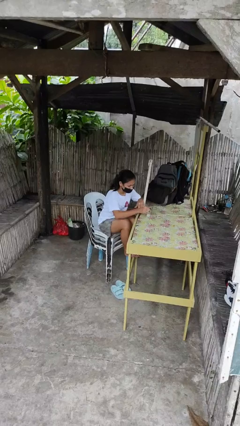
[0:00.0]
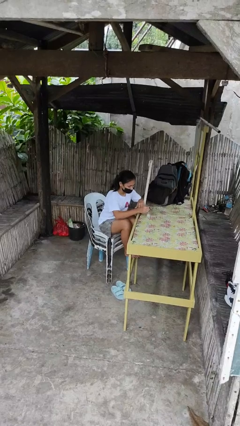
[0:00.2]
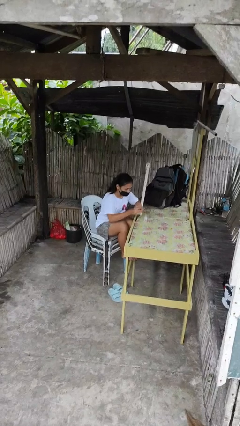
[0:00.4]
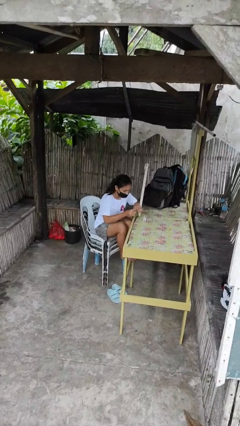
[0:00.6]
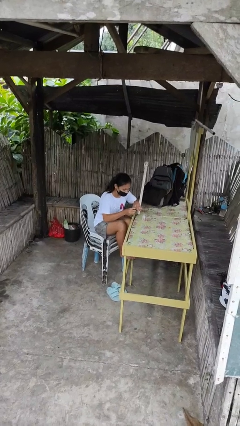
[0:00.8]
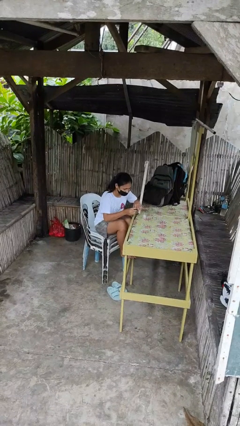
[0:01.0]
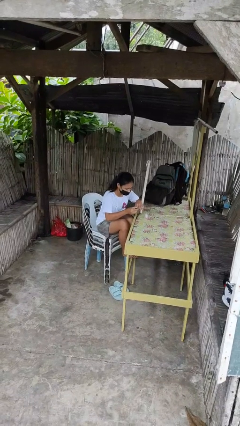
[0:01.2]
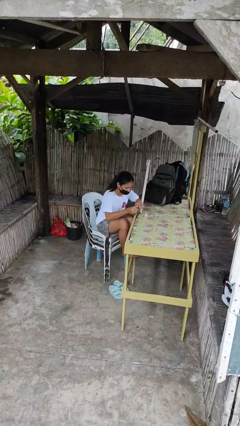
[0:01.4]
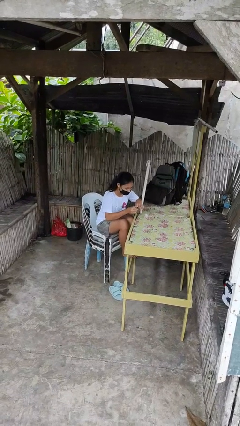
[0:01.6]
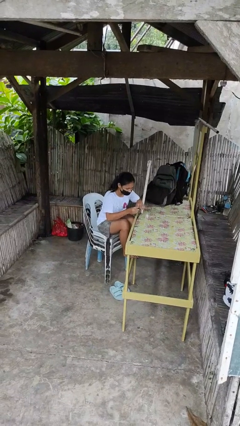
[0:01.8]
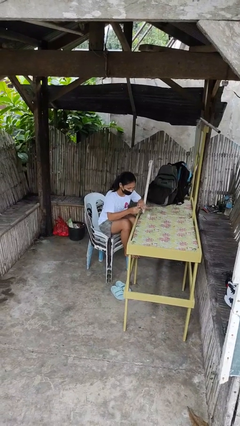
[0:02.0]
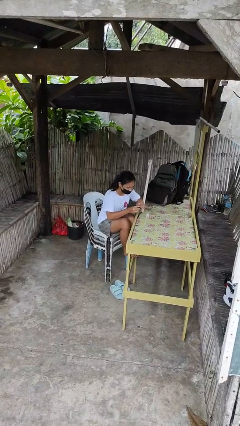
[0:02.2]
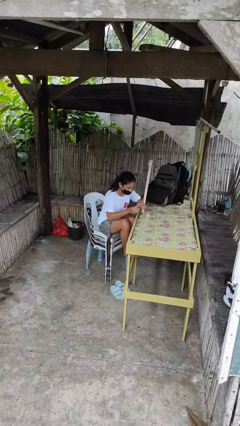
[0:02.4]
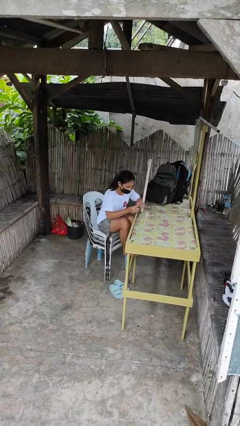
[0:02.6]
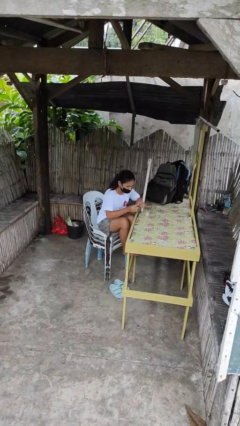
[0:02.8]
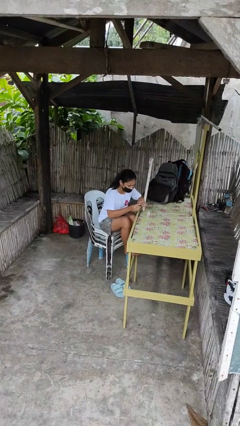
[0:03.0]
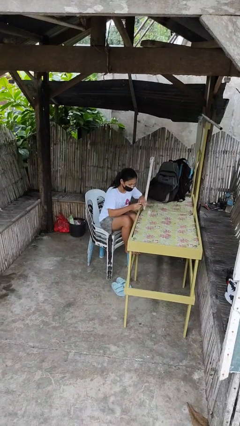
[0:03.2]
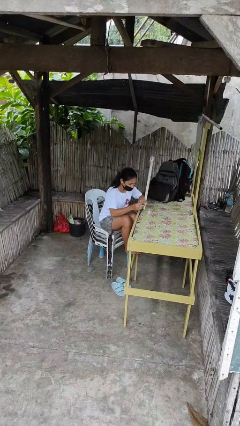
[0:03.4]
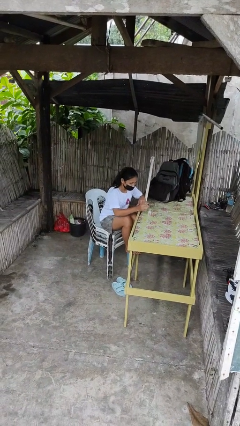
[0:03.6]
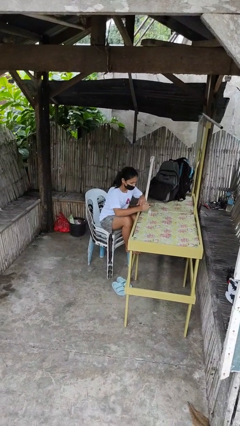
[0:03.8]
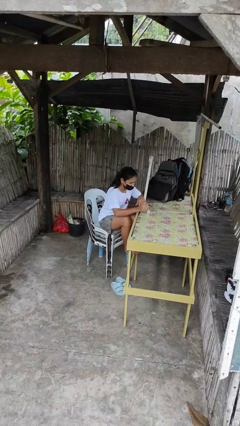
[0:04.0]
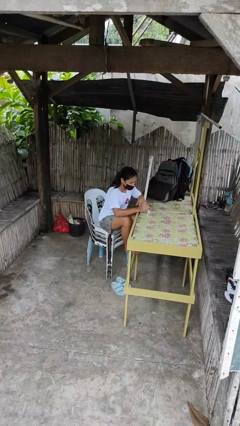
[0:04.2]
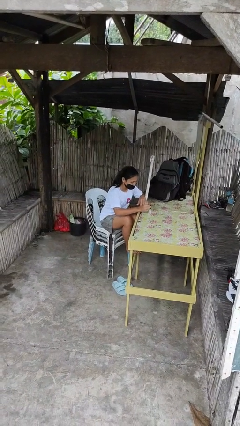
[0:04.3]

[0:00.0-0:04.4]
person paints fingernails

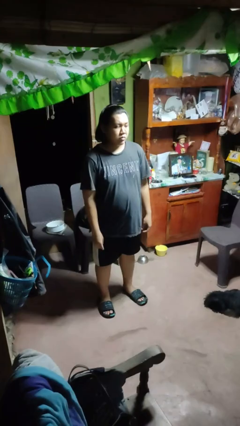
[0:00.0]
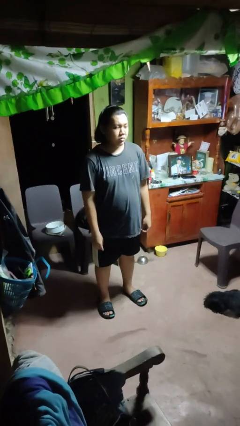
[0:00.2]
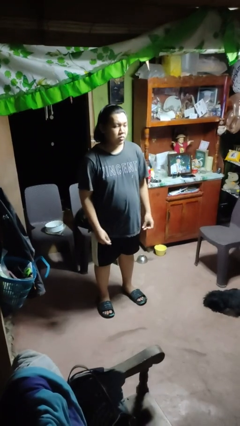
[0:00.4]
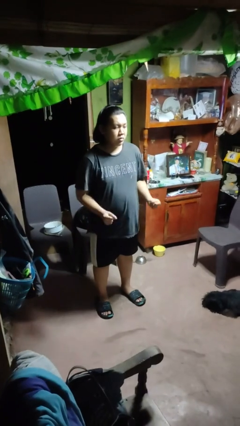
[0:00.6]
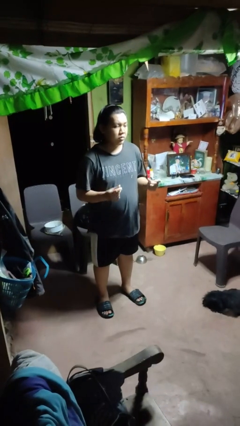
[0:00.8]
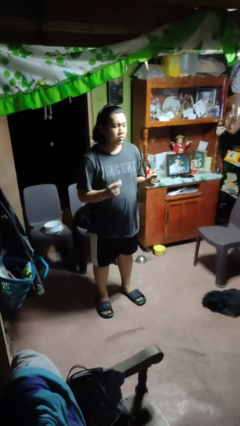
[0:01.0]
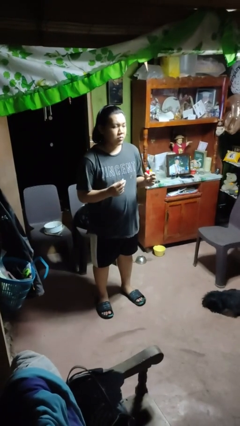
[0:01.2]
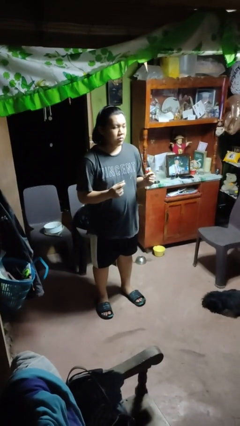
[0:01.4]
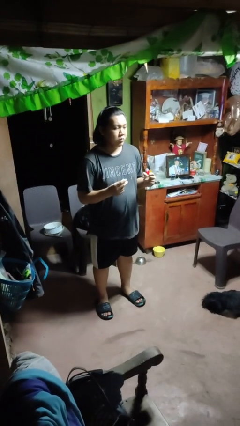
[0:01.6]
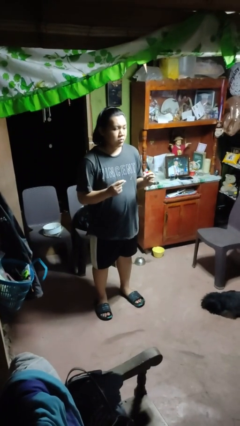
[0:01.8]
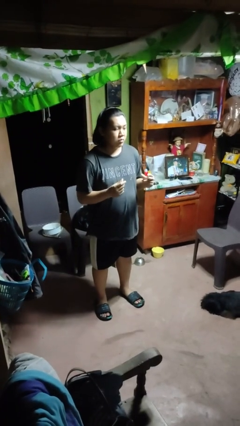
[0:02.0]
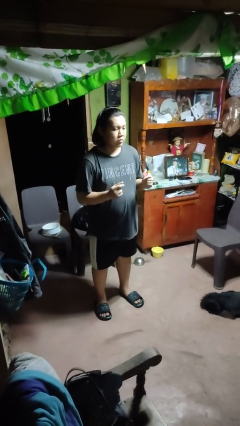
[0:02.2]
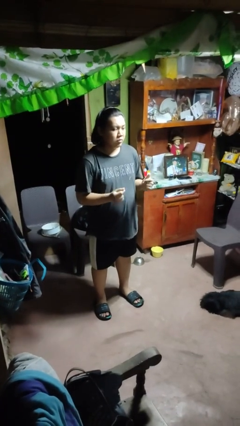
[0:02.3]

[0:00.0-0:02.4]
person snaps fingers

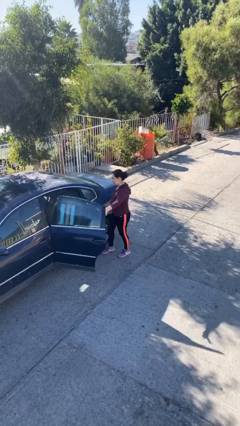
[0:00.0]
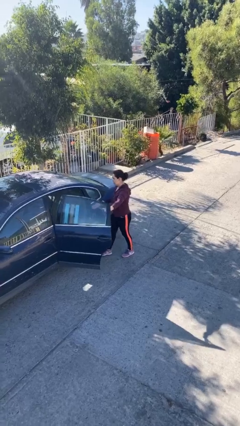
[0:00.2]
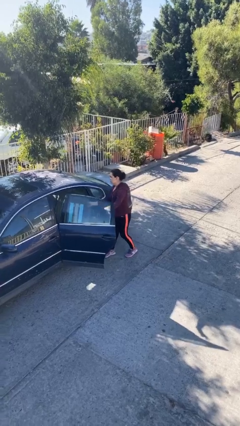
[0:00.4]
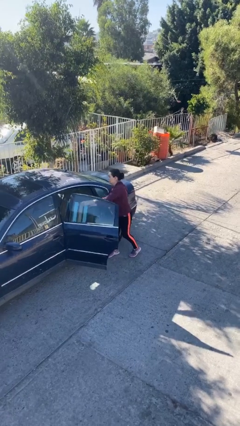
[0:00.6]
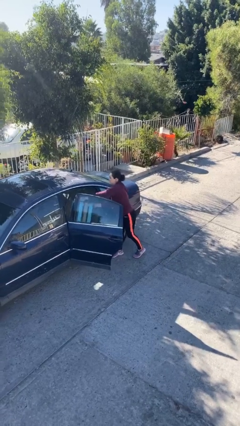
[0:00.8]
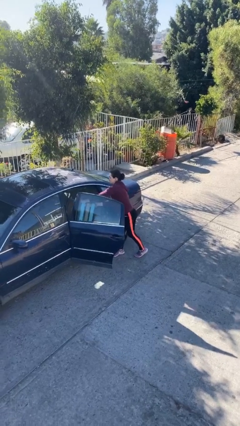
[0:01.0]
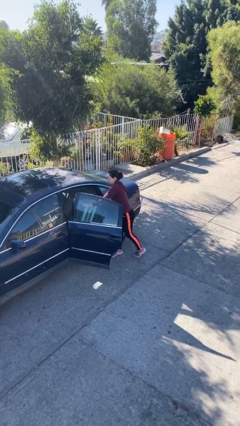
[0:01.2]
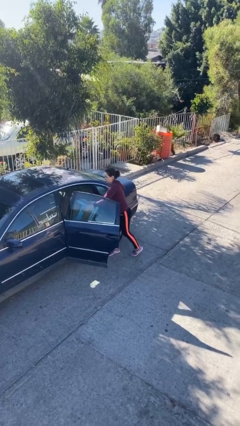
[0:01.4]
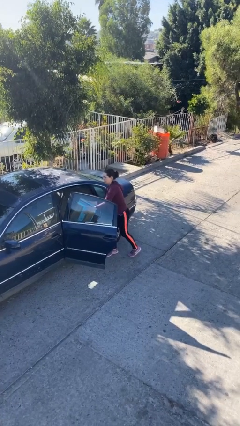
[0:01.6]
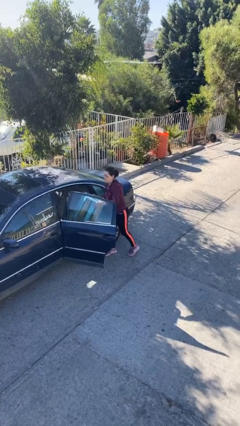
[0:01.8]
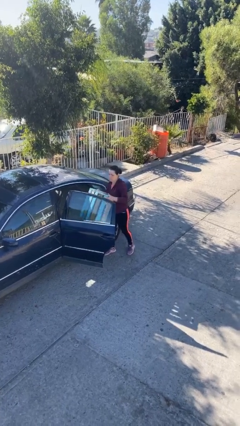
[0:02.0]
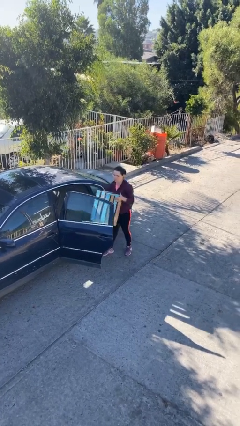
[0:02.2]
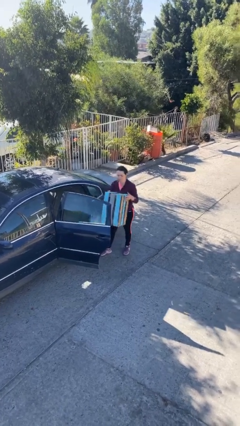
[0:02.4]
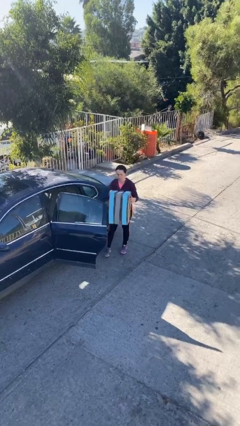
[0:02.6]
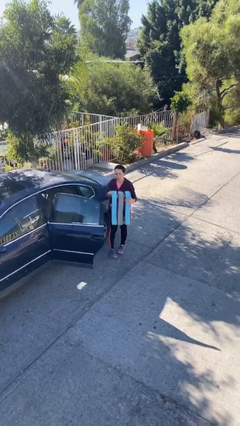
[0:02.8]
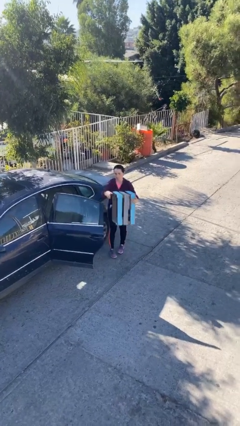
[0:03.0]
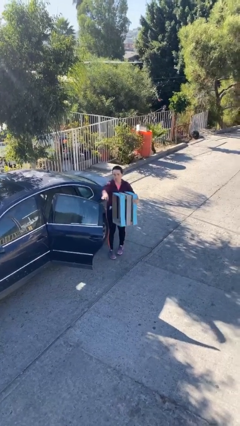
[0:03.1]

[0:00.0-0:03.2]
person unloads car

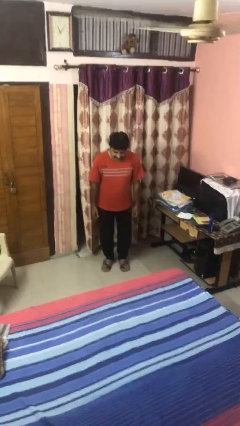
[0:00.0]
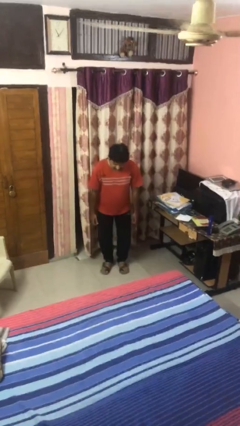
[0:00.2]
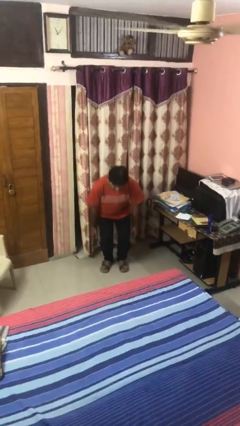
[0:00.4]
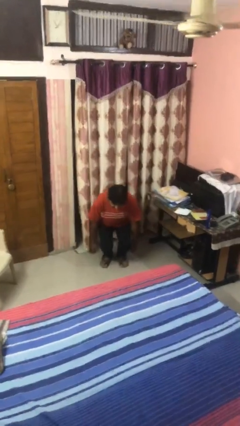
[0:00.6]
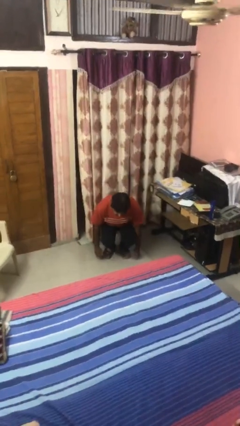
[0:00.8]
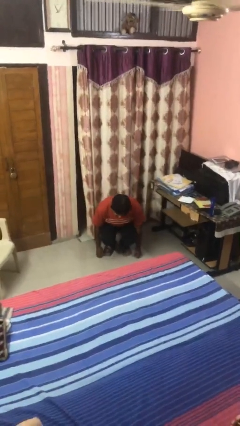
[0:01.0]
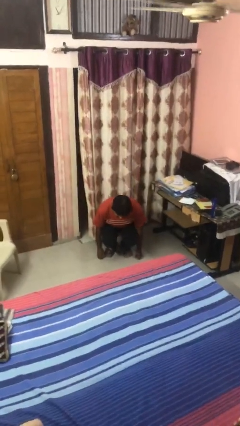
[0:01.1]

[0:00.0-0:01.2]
person squats

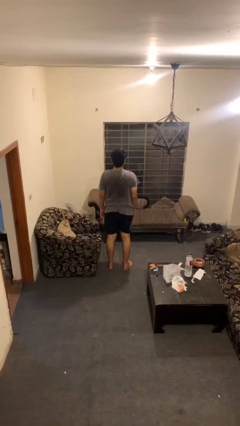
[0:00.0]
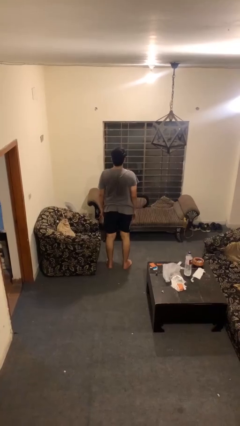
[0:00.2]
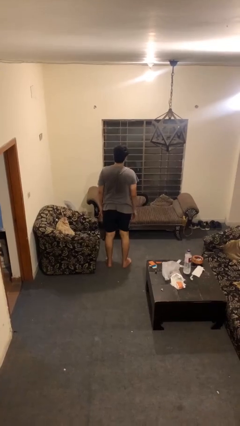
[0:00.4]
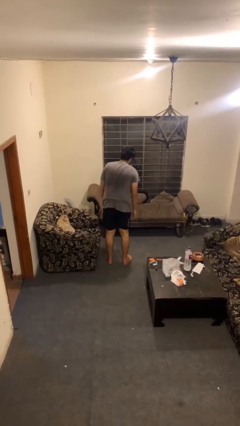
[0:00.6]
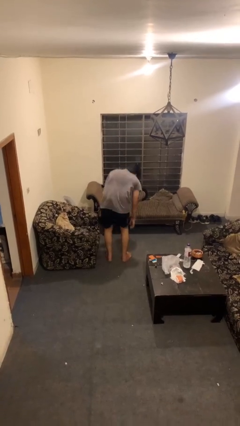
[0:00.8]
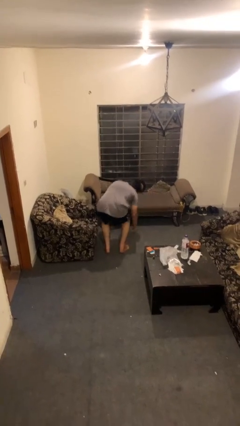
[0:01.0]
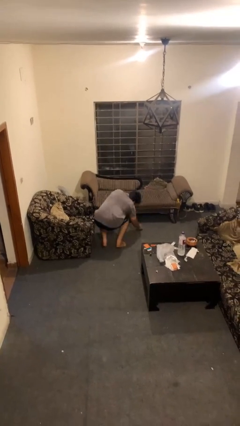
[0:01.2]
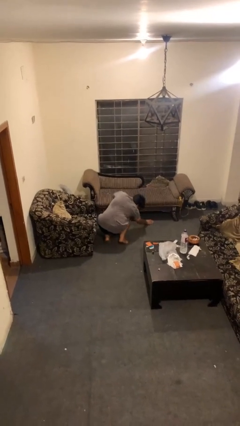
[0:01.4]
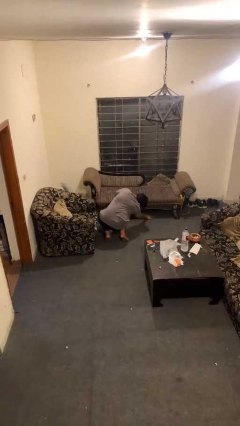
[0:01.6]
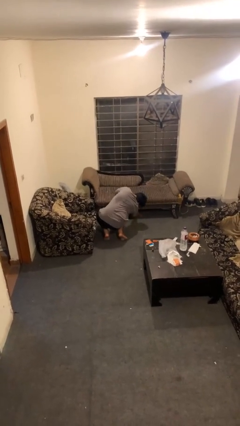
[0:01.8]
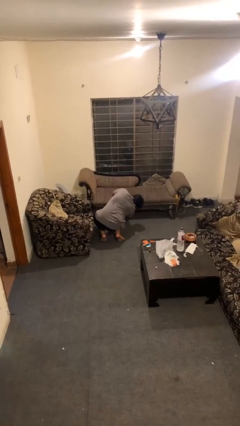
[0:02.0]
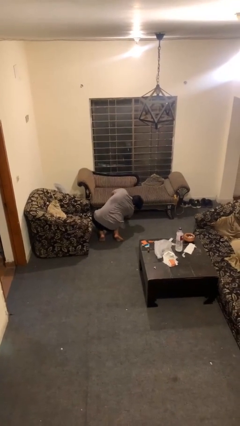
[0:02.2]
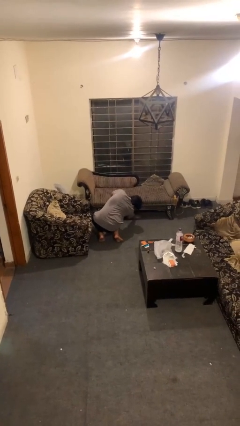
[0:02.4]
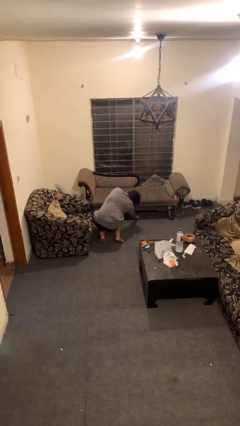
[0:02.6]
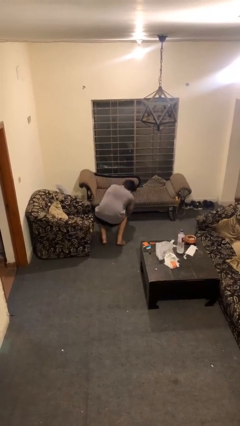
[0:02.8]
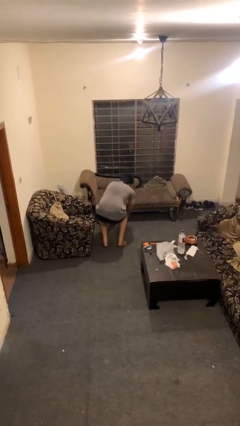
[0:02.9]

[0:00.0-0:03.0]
person searches under couch

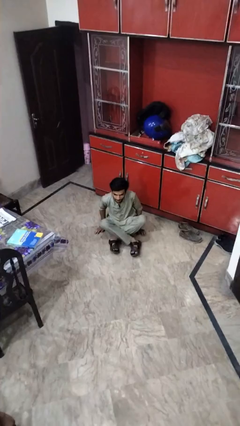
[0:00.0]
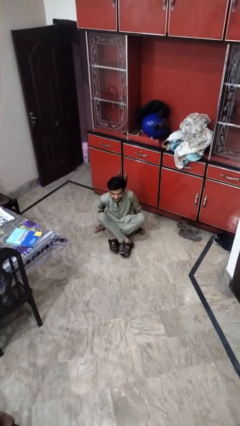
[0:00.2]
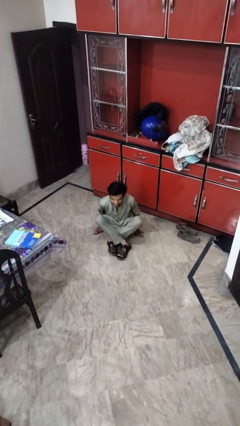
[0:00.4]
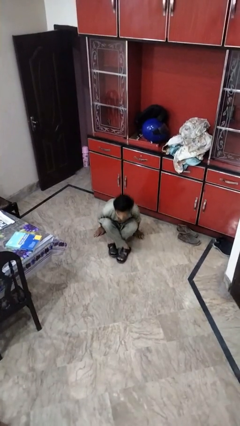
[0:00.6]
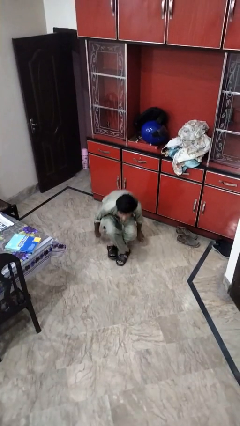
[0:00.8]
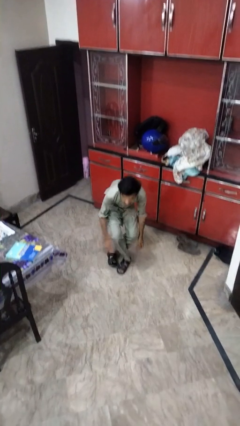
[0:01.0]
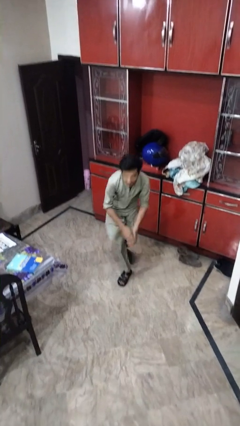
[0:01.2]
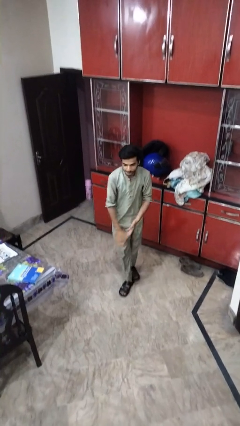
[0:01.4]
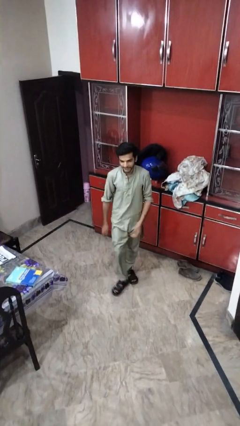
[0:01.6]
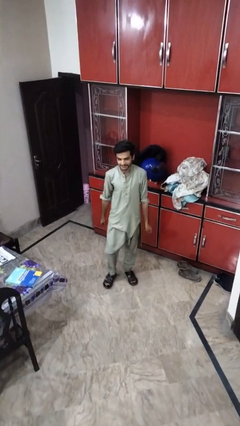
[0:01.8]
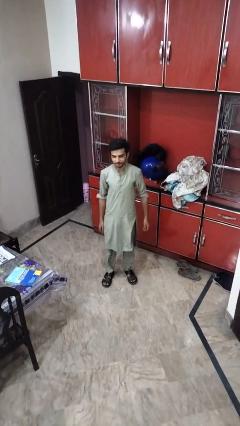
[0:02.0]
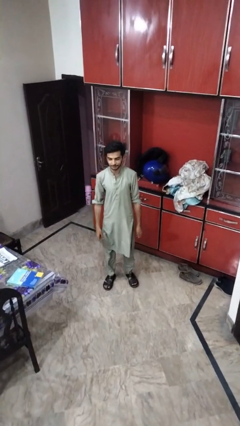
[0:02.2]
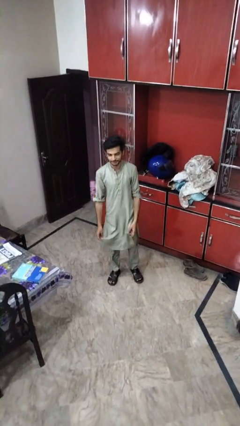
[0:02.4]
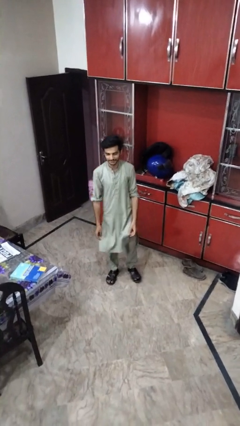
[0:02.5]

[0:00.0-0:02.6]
person stands up from floor

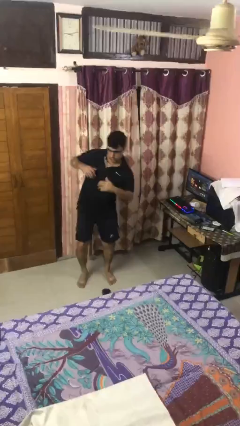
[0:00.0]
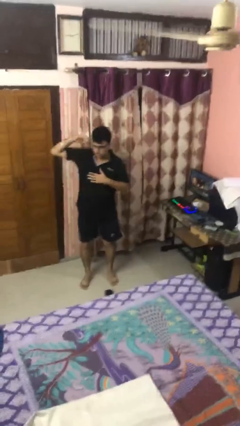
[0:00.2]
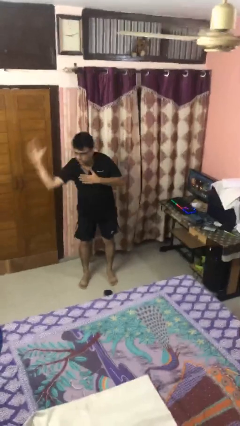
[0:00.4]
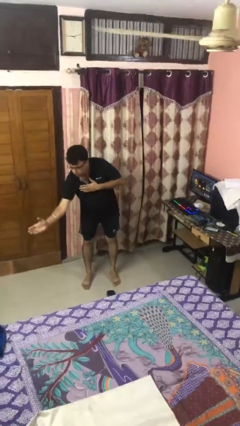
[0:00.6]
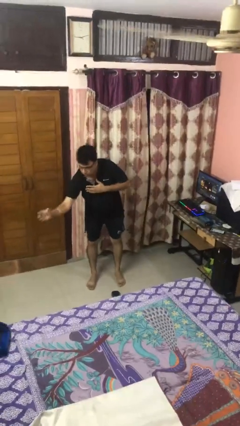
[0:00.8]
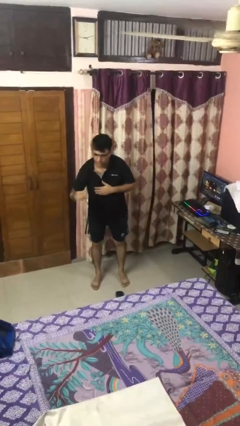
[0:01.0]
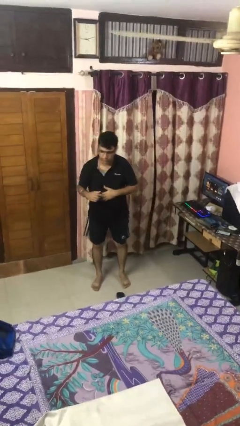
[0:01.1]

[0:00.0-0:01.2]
person karate chop
